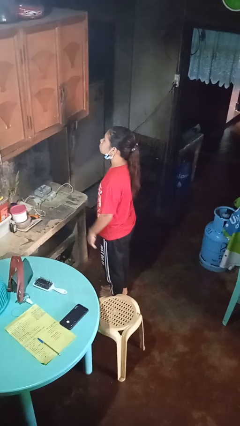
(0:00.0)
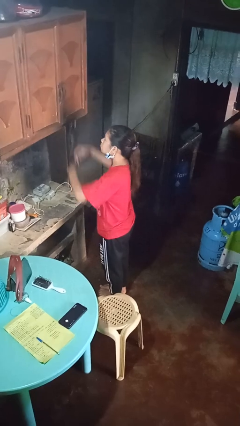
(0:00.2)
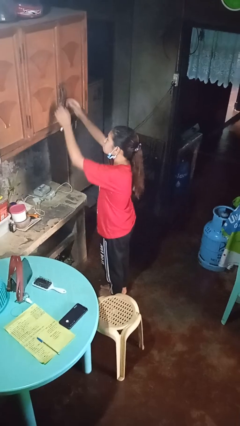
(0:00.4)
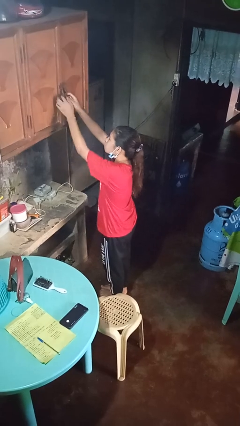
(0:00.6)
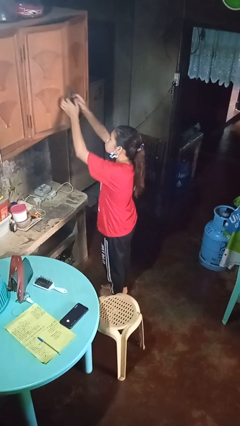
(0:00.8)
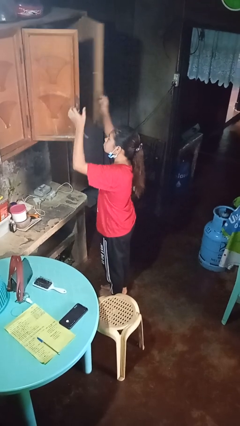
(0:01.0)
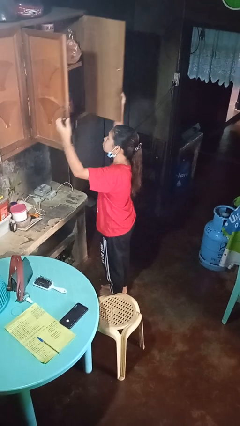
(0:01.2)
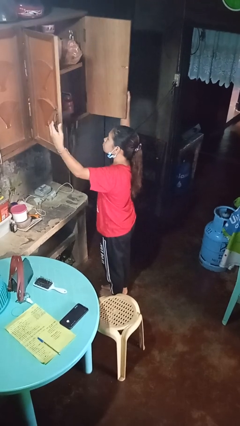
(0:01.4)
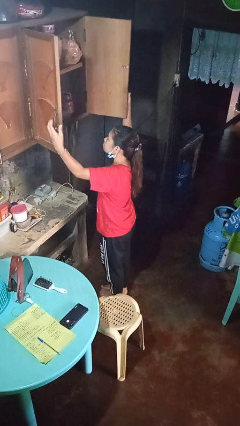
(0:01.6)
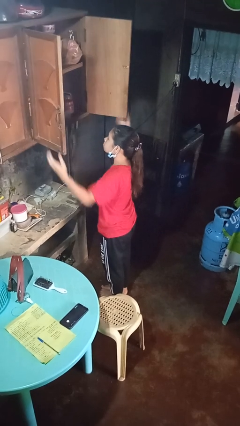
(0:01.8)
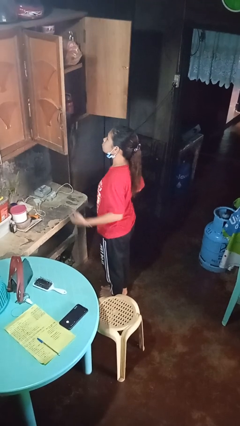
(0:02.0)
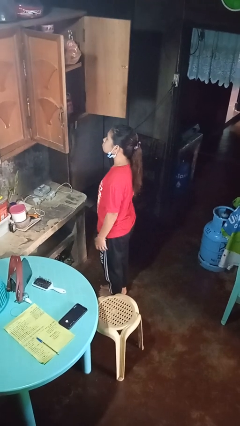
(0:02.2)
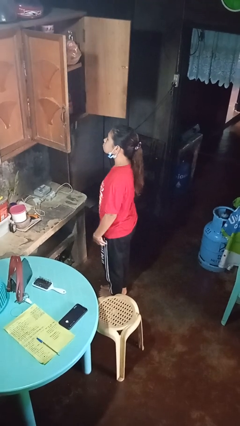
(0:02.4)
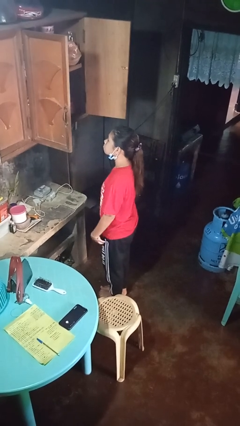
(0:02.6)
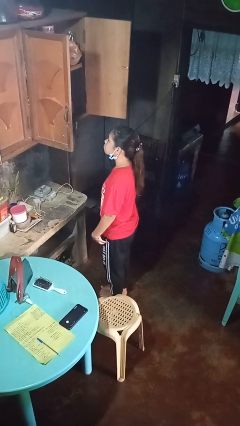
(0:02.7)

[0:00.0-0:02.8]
person opens cabinet

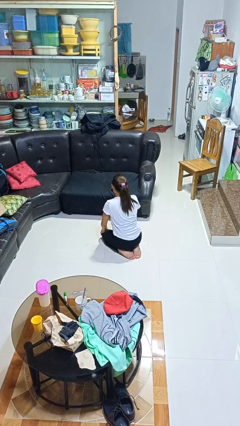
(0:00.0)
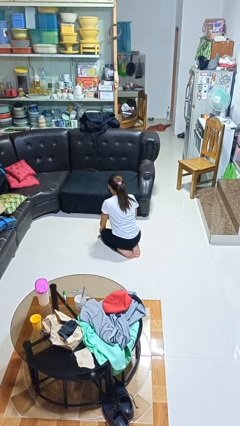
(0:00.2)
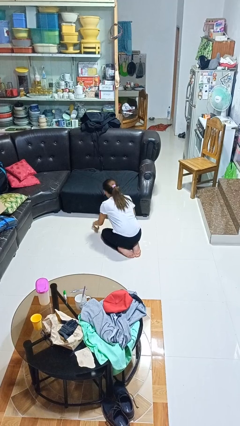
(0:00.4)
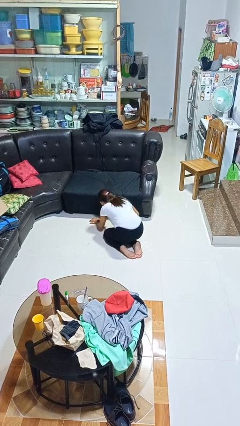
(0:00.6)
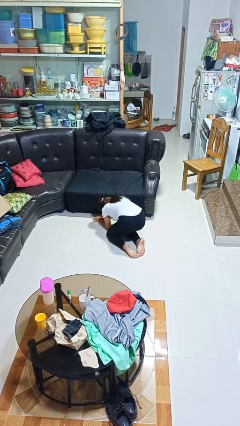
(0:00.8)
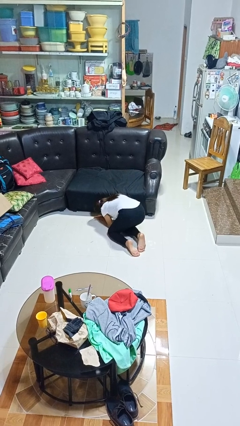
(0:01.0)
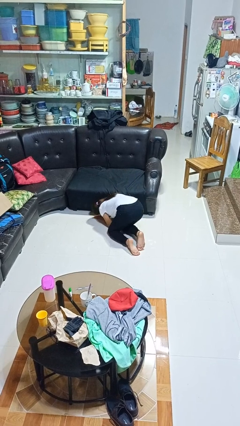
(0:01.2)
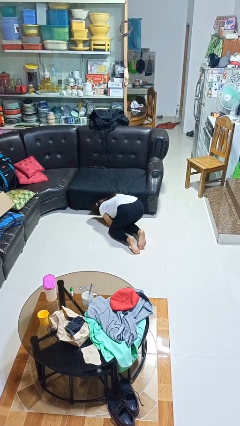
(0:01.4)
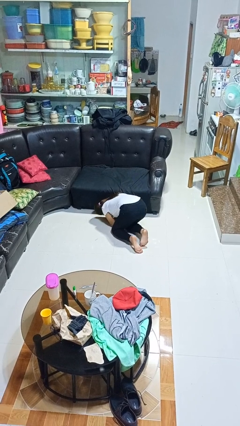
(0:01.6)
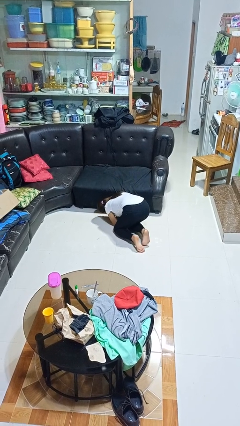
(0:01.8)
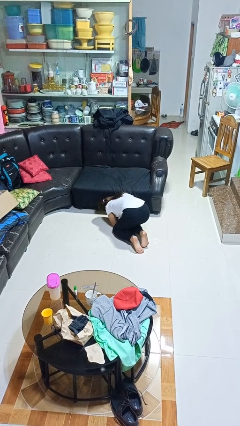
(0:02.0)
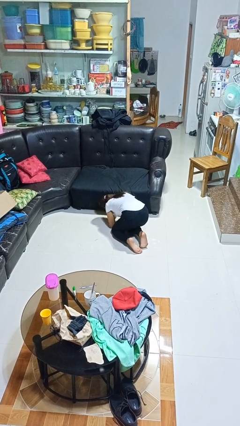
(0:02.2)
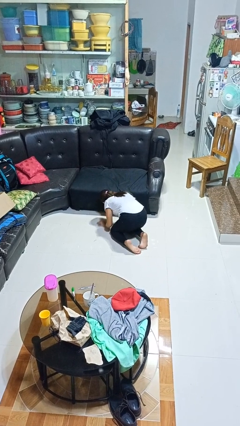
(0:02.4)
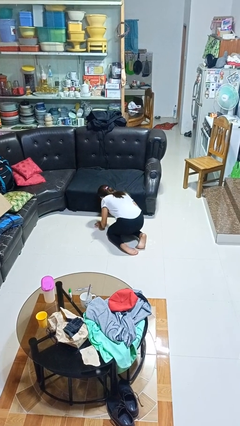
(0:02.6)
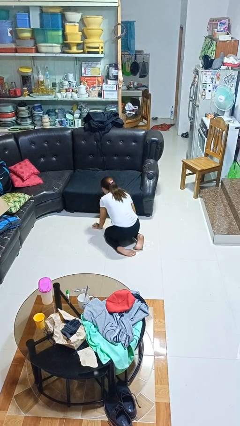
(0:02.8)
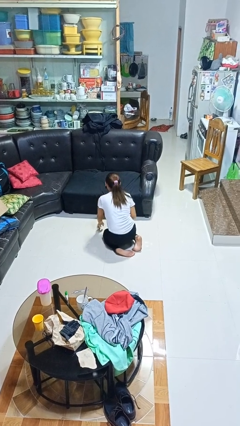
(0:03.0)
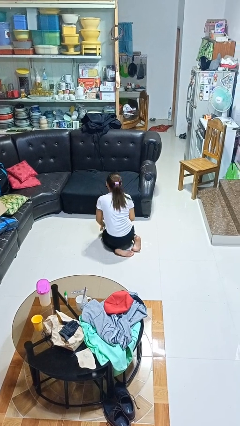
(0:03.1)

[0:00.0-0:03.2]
person searches under couch

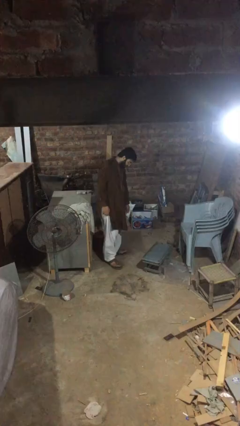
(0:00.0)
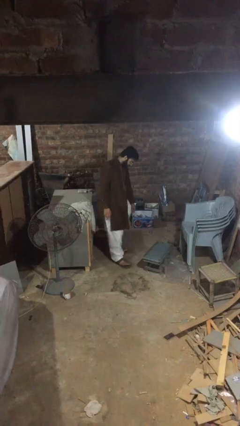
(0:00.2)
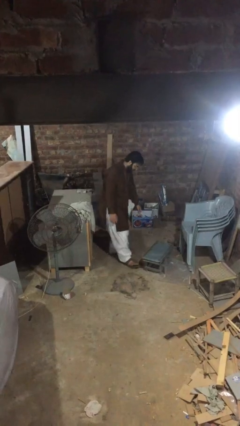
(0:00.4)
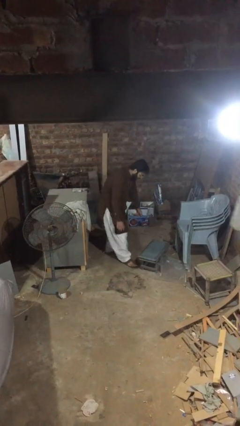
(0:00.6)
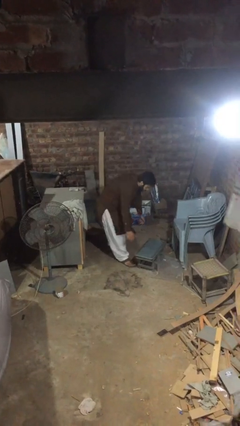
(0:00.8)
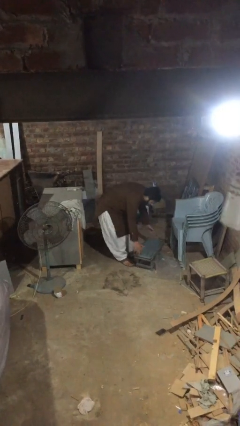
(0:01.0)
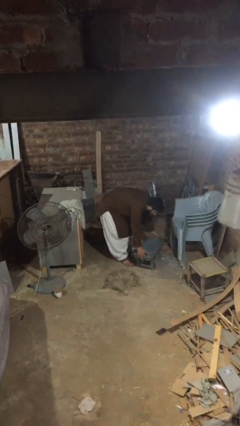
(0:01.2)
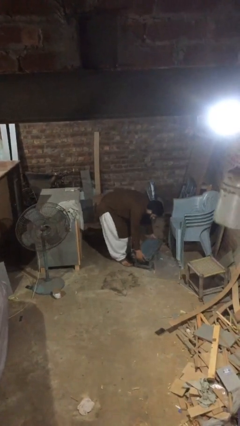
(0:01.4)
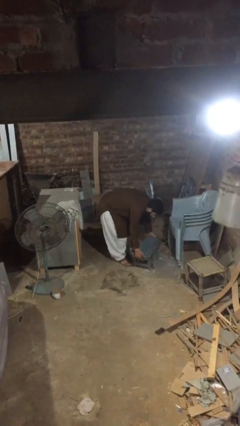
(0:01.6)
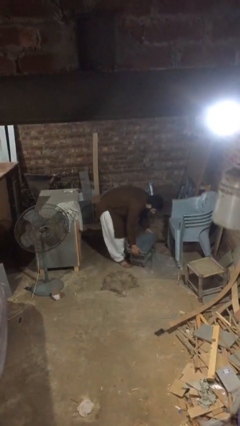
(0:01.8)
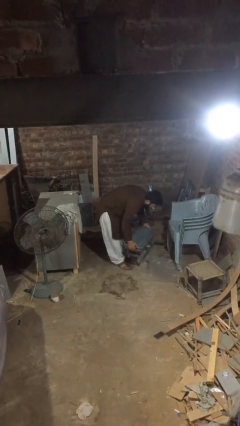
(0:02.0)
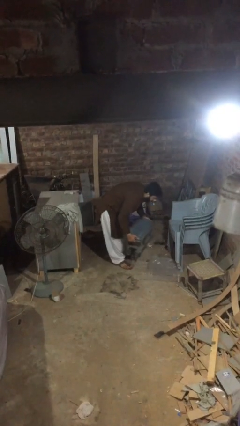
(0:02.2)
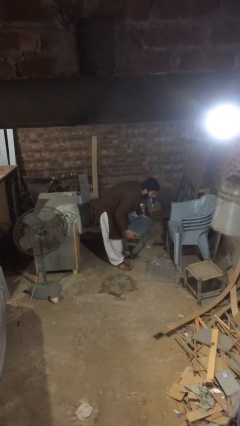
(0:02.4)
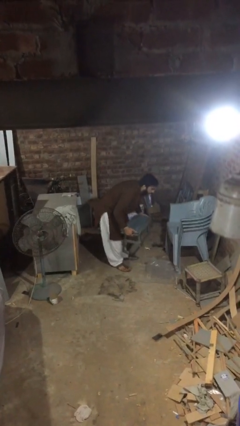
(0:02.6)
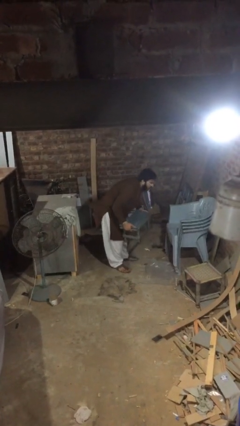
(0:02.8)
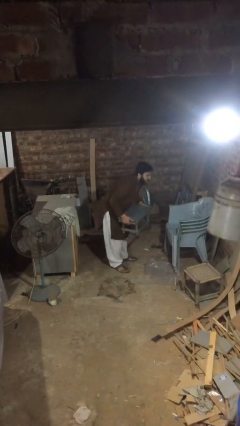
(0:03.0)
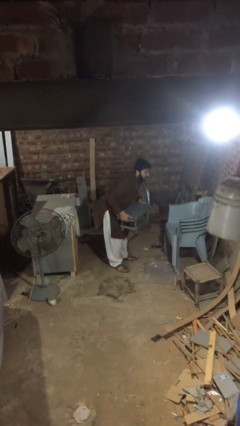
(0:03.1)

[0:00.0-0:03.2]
person picks up object from floor

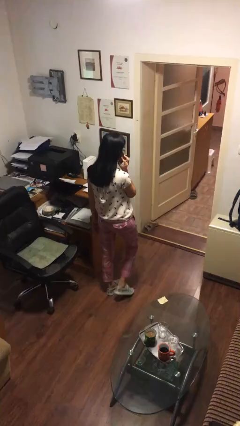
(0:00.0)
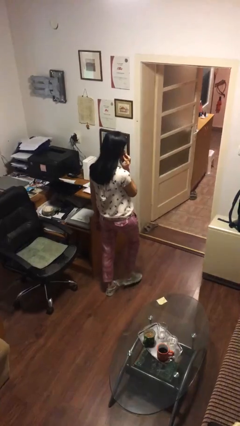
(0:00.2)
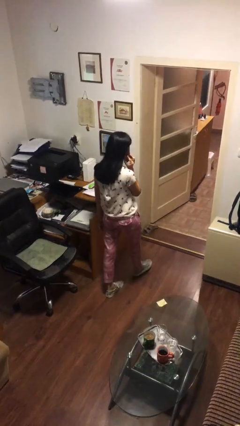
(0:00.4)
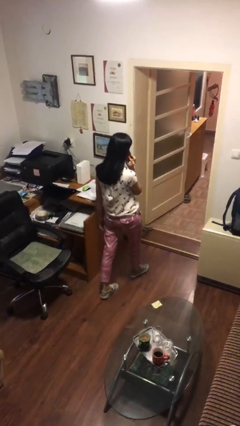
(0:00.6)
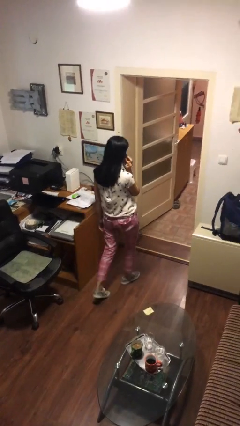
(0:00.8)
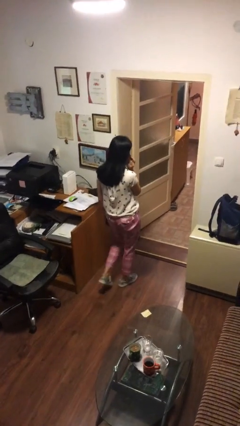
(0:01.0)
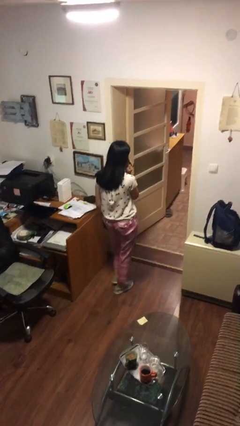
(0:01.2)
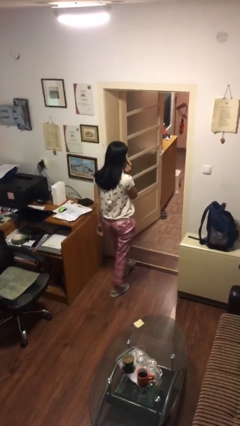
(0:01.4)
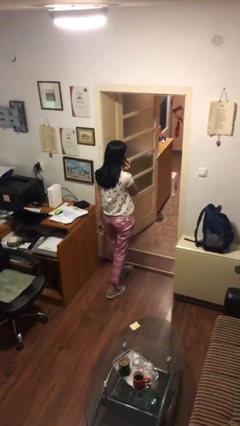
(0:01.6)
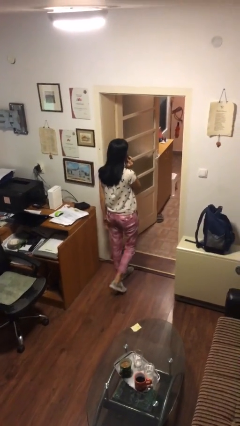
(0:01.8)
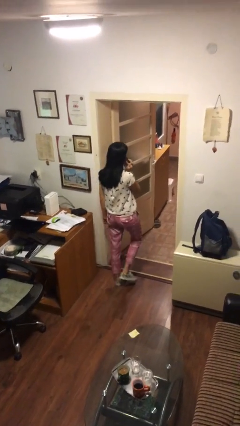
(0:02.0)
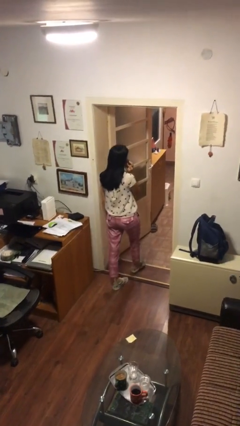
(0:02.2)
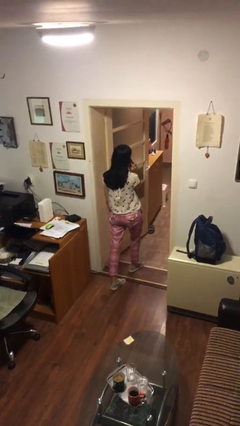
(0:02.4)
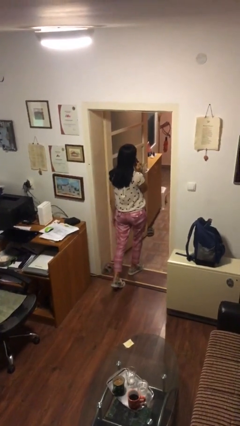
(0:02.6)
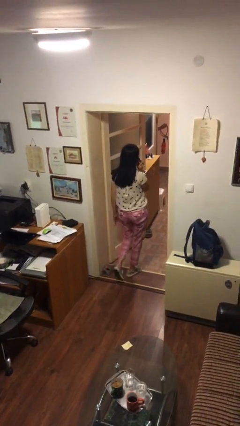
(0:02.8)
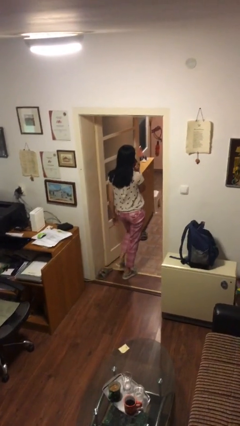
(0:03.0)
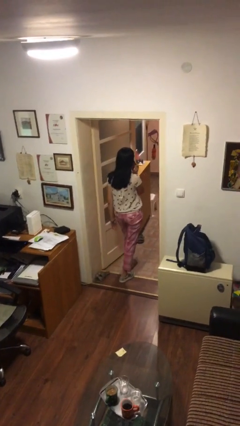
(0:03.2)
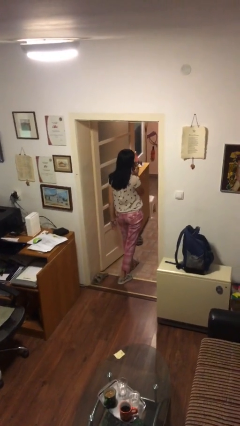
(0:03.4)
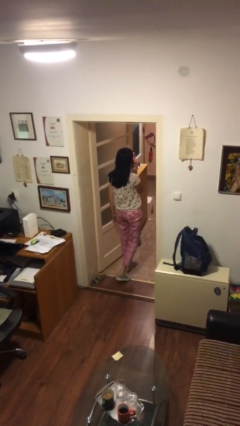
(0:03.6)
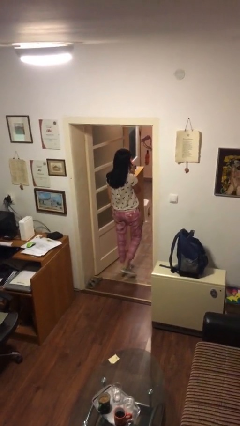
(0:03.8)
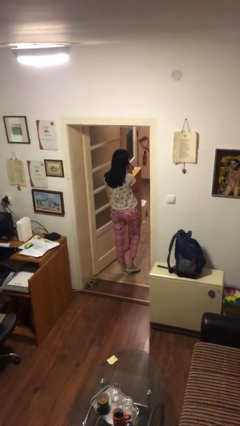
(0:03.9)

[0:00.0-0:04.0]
person exits scene through structure

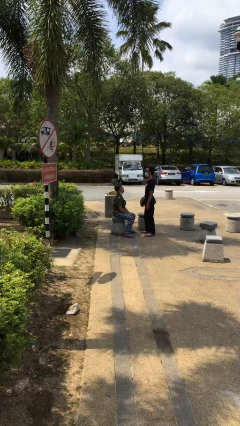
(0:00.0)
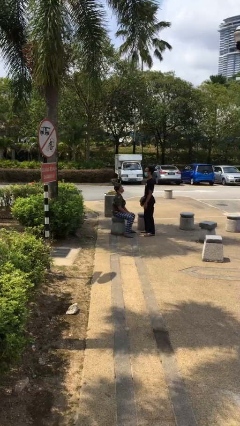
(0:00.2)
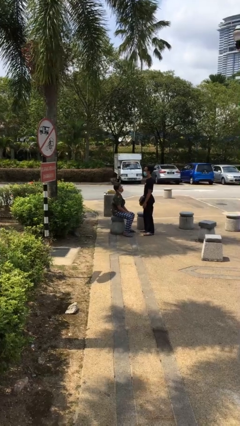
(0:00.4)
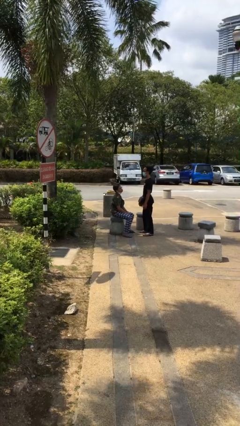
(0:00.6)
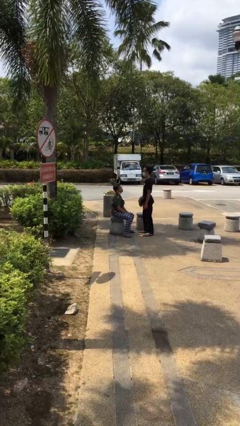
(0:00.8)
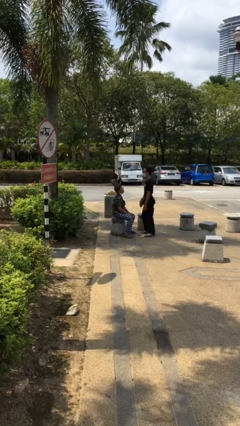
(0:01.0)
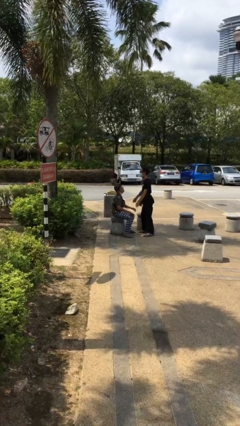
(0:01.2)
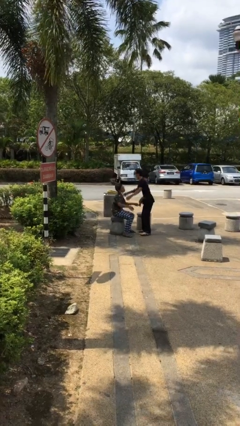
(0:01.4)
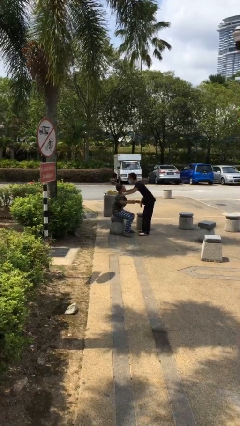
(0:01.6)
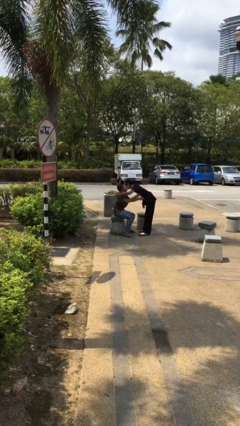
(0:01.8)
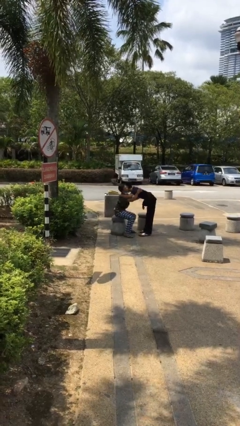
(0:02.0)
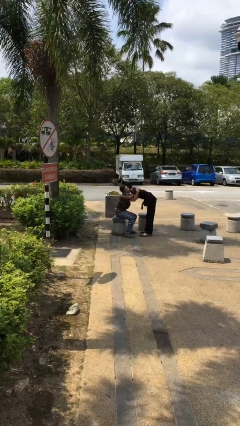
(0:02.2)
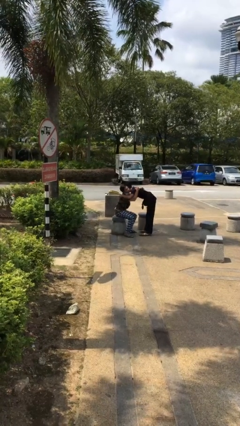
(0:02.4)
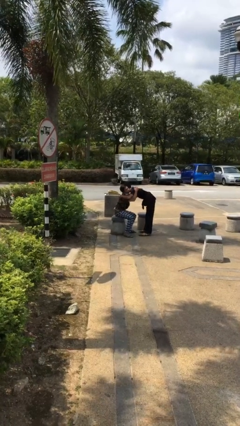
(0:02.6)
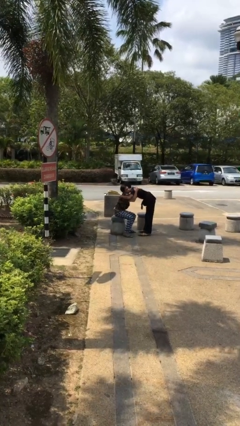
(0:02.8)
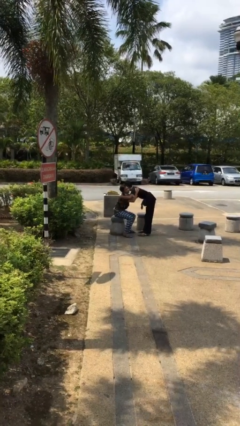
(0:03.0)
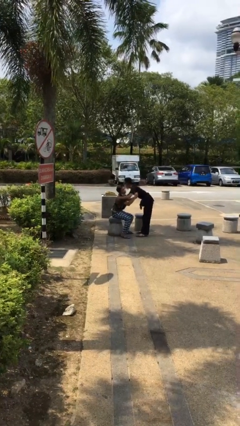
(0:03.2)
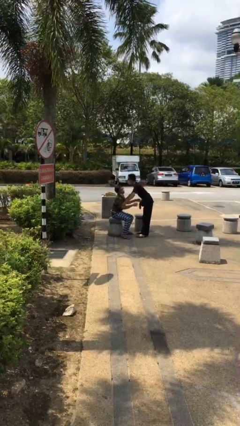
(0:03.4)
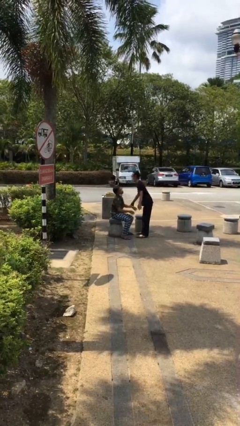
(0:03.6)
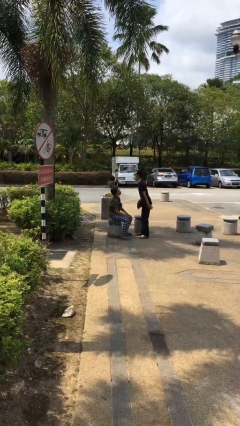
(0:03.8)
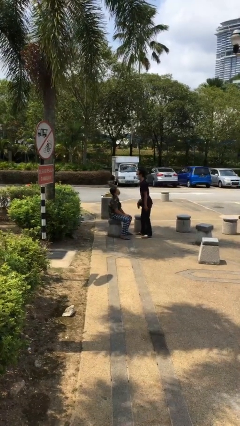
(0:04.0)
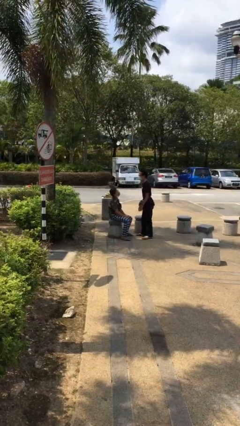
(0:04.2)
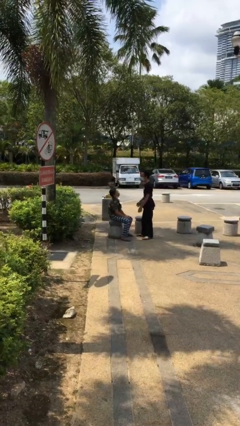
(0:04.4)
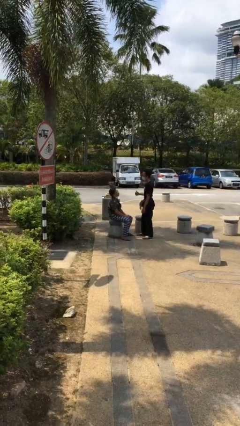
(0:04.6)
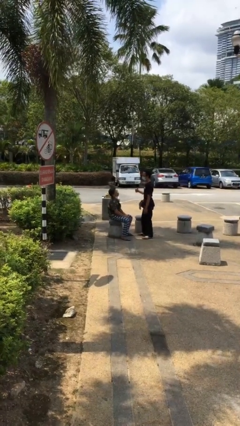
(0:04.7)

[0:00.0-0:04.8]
person embraces person
